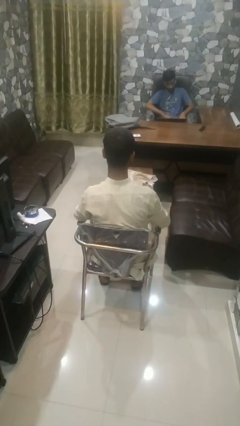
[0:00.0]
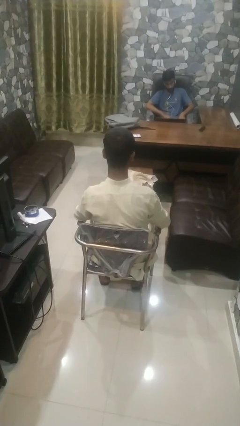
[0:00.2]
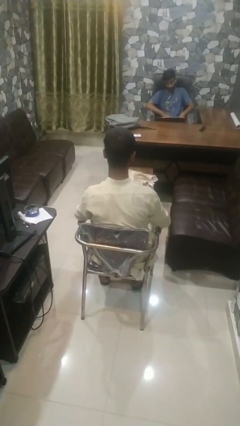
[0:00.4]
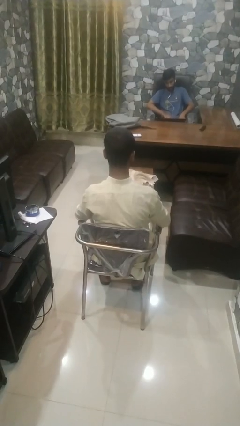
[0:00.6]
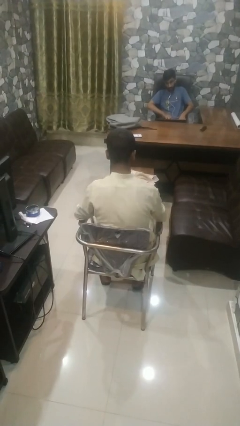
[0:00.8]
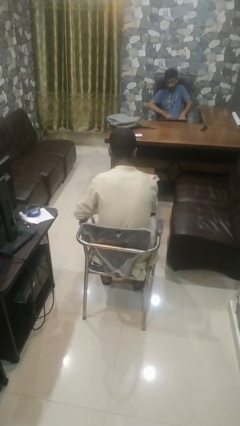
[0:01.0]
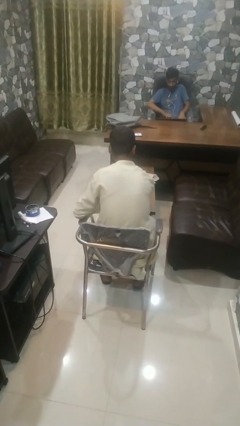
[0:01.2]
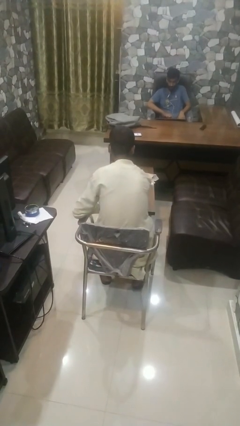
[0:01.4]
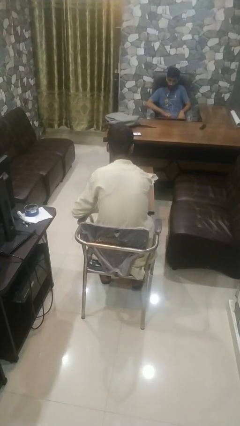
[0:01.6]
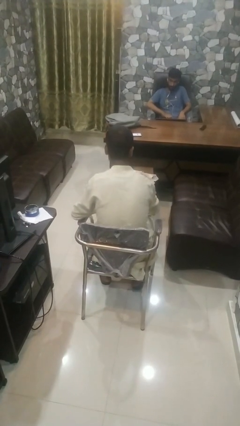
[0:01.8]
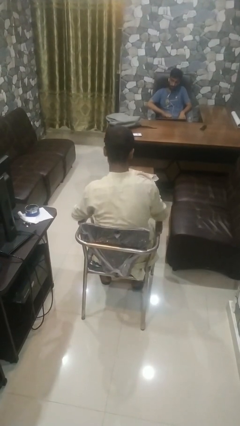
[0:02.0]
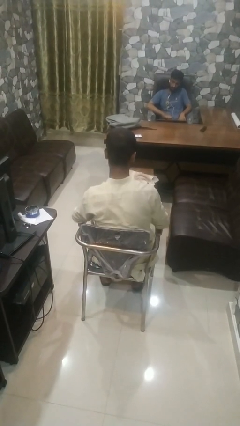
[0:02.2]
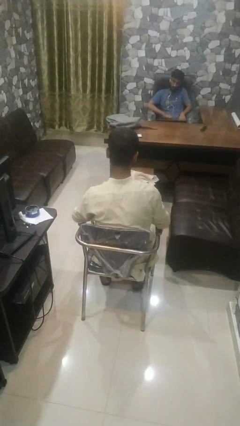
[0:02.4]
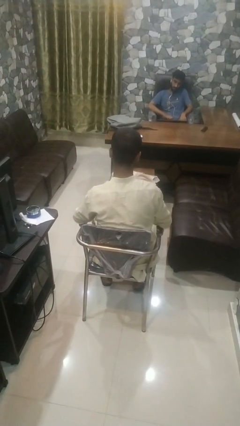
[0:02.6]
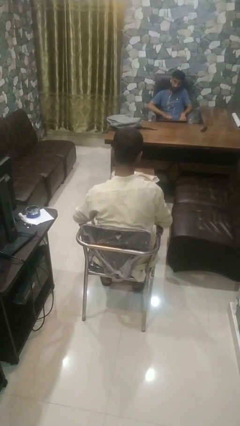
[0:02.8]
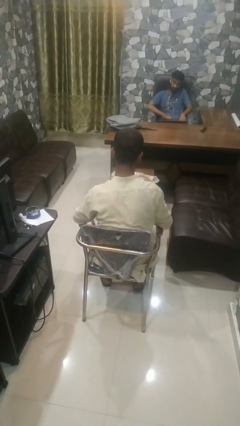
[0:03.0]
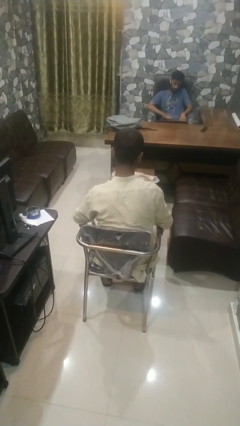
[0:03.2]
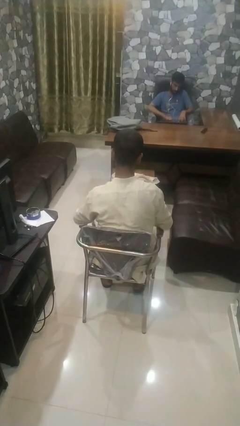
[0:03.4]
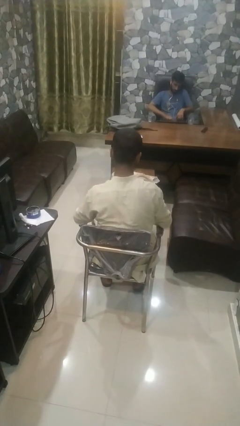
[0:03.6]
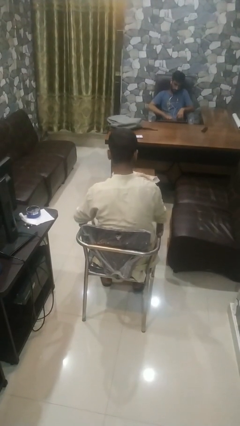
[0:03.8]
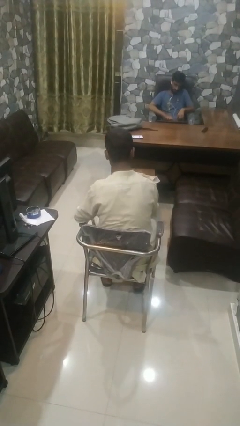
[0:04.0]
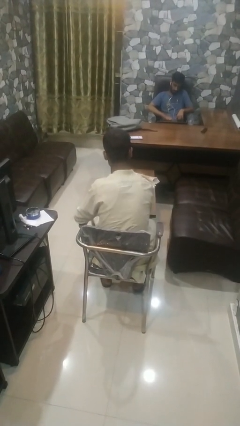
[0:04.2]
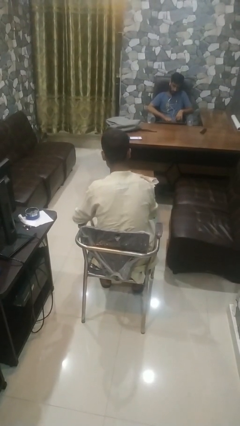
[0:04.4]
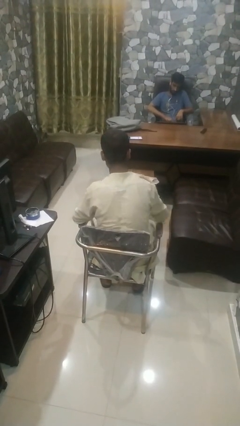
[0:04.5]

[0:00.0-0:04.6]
person paints fingernails

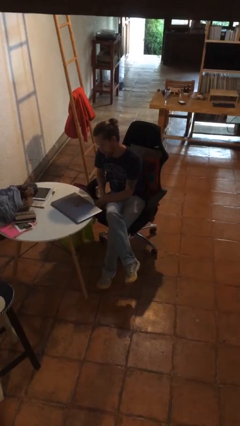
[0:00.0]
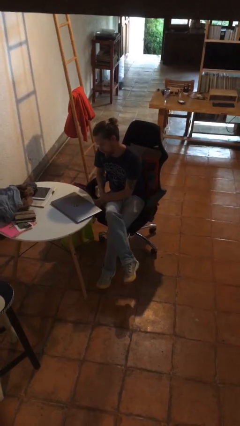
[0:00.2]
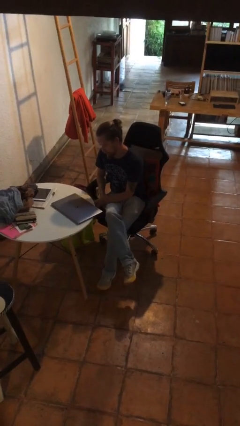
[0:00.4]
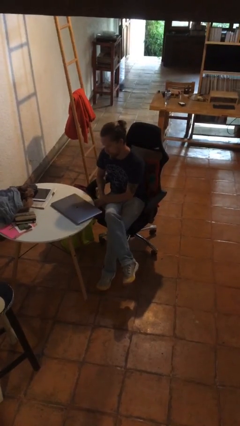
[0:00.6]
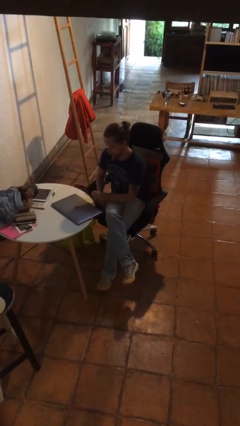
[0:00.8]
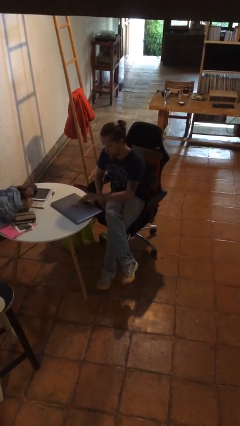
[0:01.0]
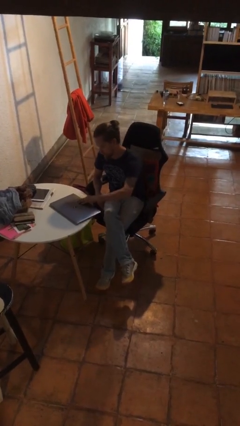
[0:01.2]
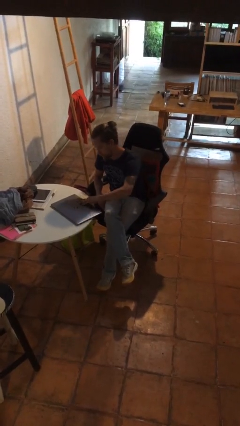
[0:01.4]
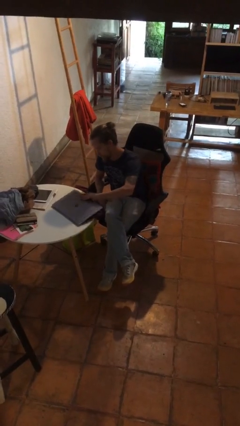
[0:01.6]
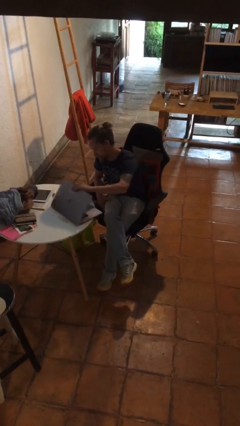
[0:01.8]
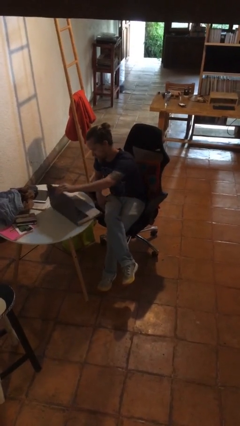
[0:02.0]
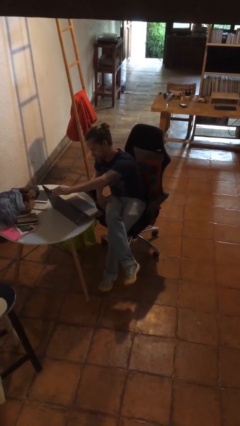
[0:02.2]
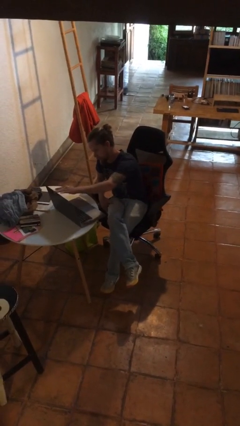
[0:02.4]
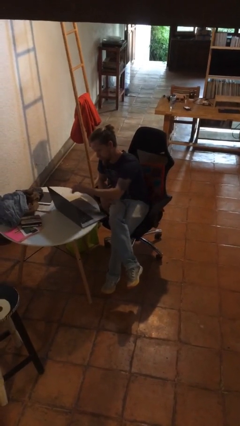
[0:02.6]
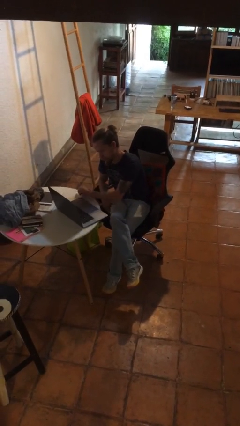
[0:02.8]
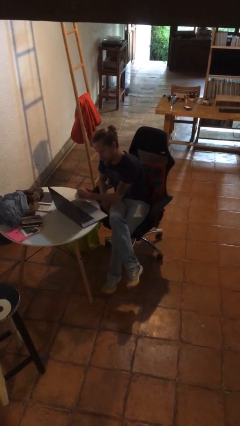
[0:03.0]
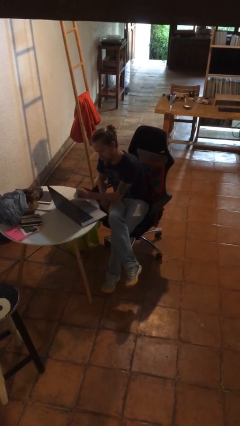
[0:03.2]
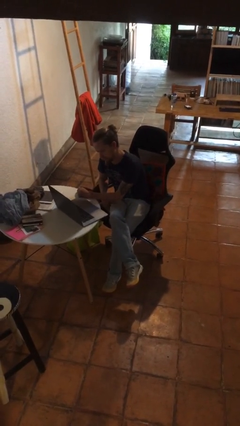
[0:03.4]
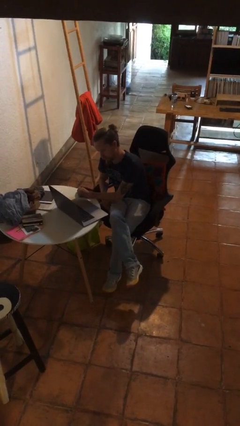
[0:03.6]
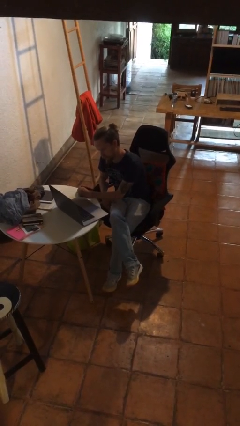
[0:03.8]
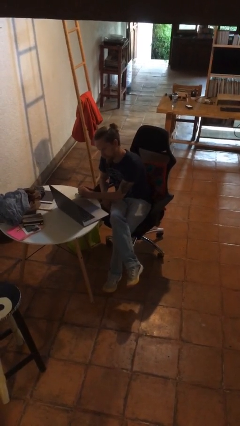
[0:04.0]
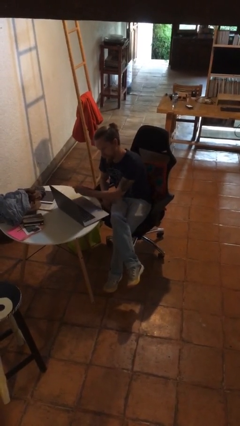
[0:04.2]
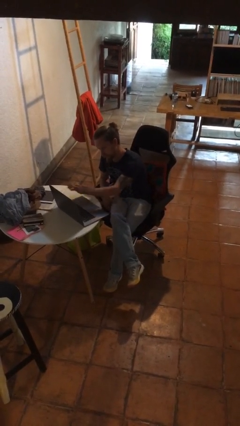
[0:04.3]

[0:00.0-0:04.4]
person opens laptop

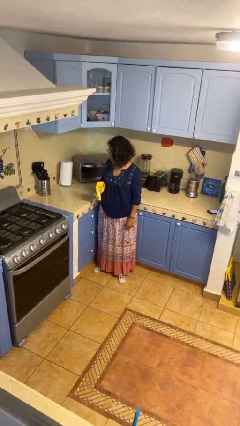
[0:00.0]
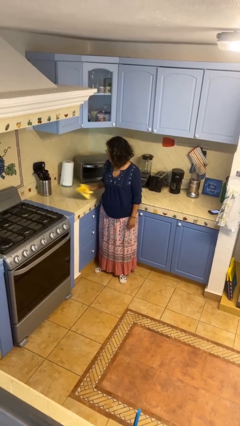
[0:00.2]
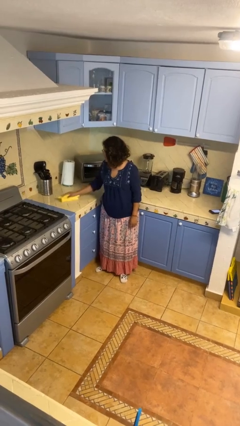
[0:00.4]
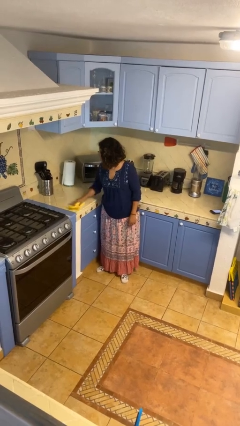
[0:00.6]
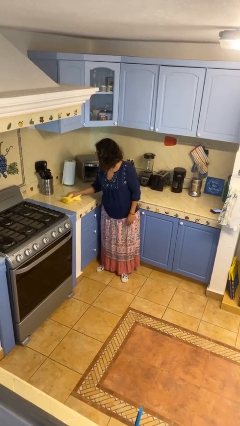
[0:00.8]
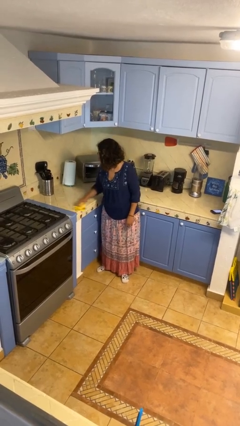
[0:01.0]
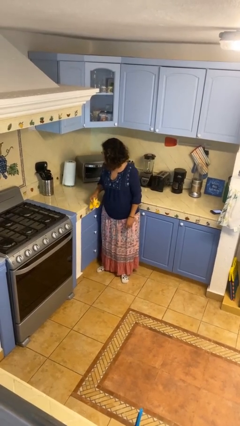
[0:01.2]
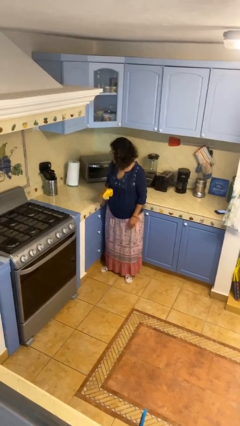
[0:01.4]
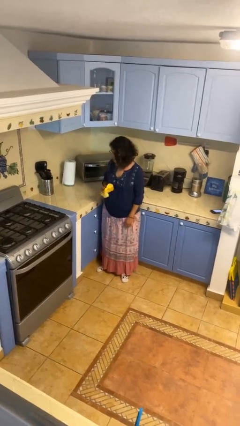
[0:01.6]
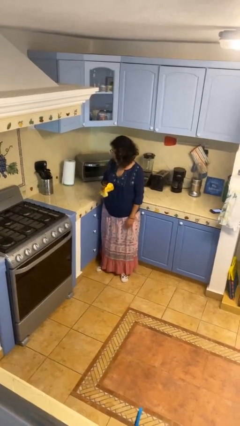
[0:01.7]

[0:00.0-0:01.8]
person cleans table with rag

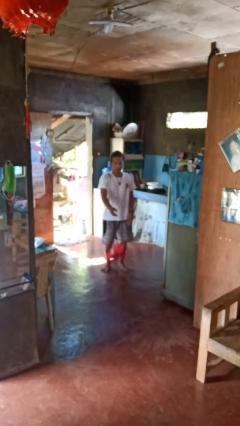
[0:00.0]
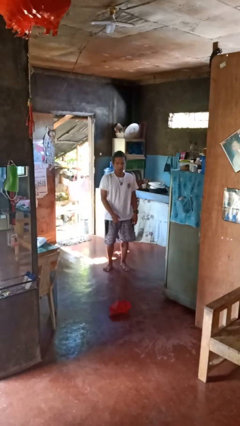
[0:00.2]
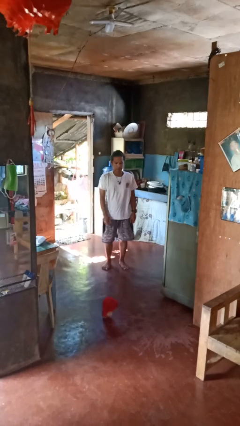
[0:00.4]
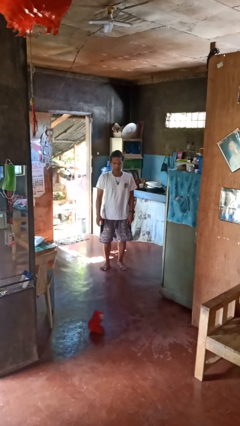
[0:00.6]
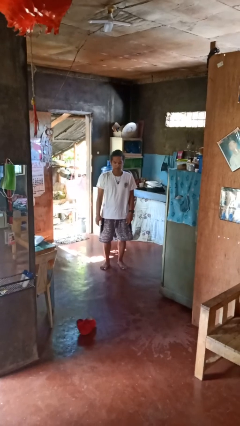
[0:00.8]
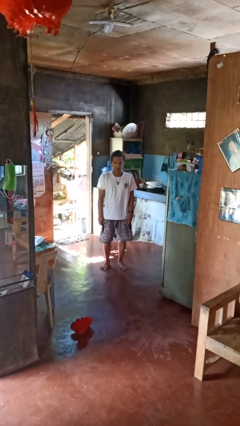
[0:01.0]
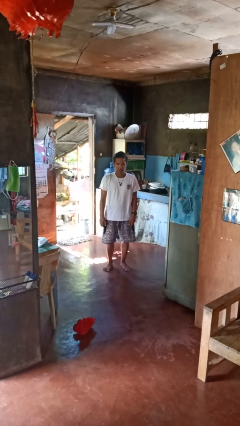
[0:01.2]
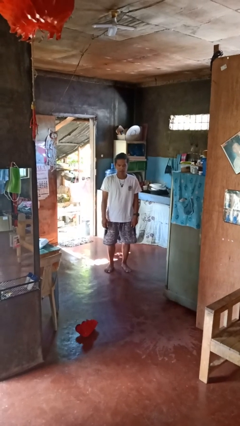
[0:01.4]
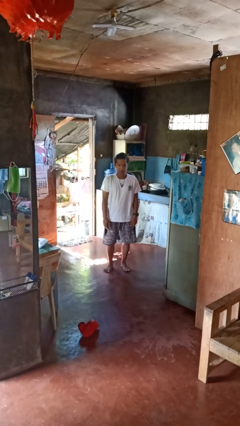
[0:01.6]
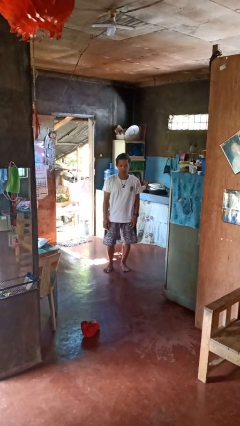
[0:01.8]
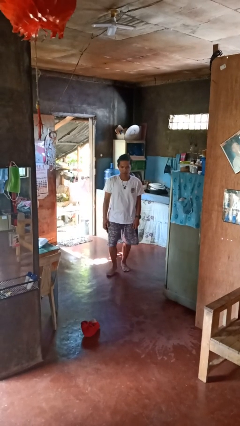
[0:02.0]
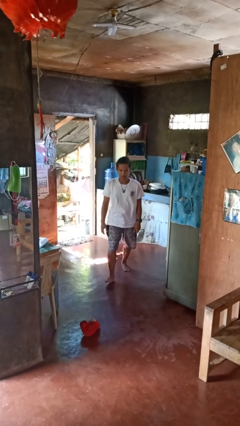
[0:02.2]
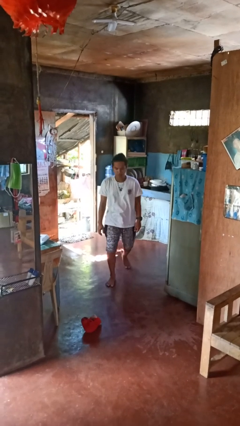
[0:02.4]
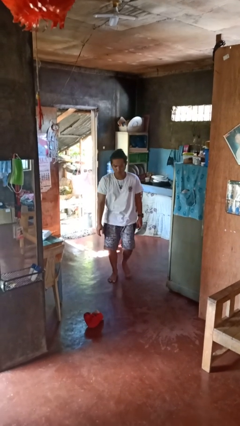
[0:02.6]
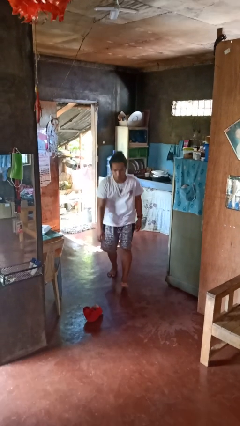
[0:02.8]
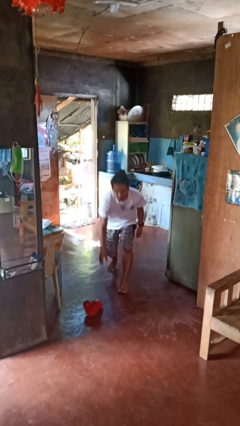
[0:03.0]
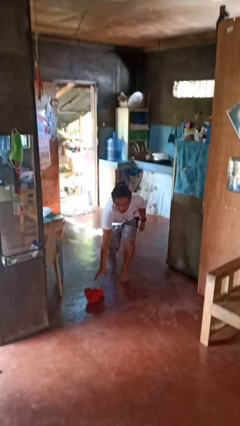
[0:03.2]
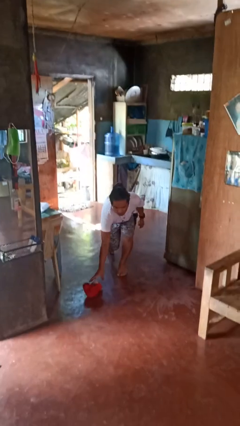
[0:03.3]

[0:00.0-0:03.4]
person throws object to ground

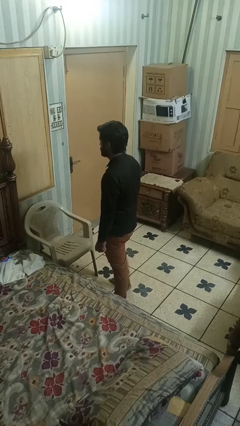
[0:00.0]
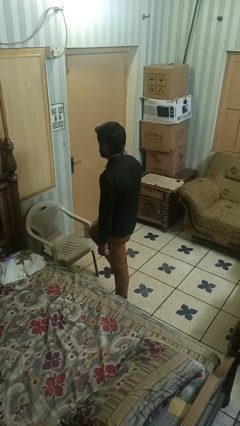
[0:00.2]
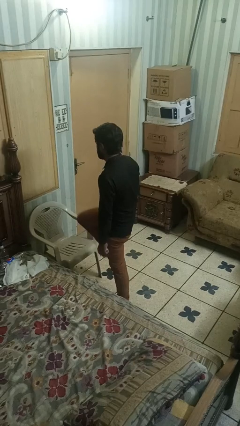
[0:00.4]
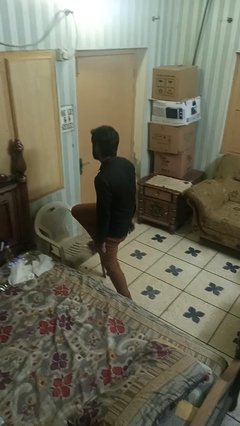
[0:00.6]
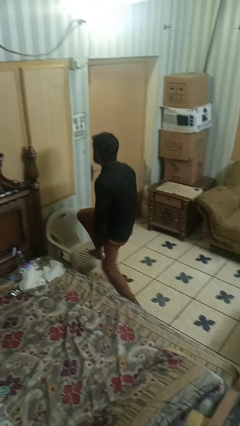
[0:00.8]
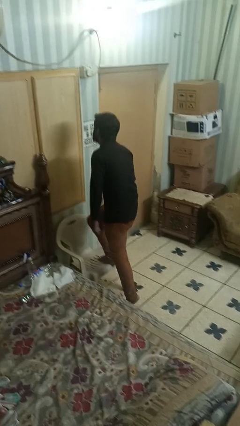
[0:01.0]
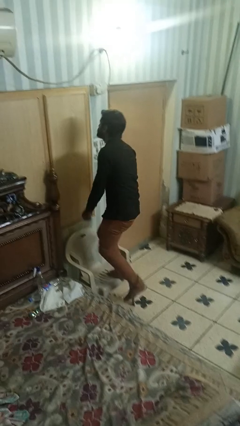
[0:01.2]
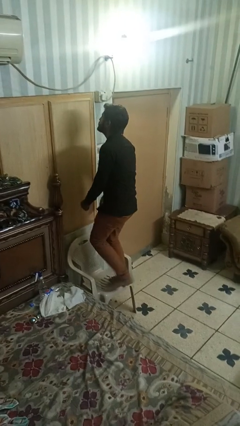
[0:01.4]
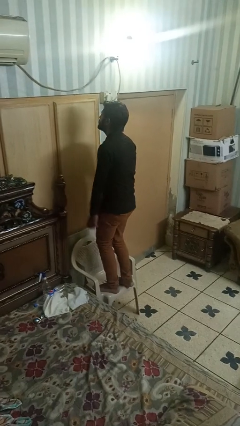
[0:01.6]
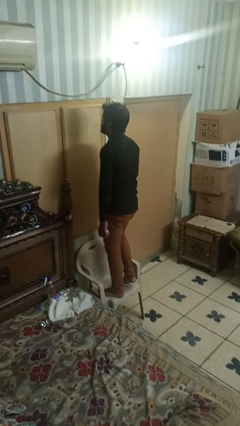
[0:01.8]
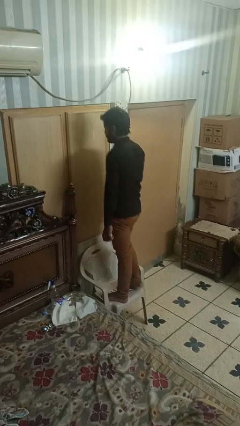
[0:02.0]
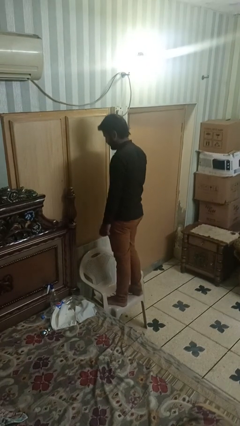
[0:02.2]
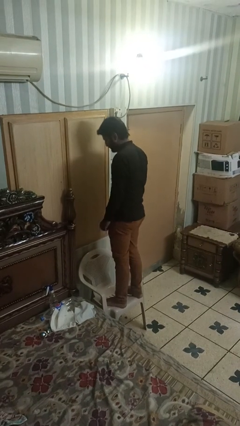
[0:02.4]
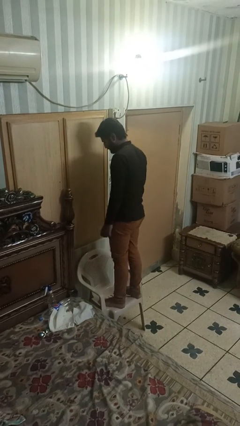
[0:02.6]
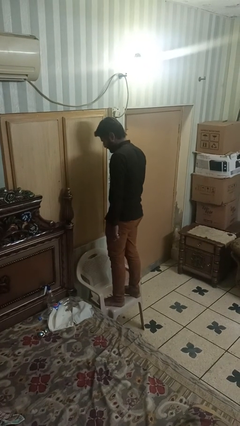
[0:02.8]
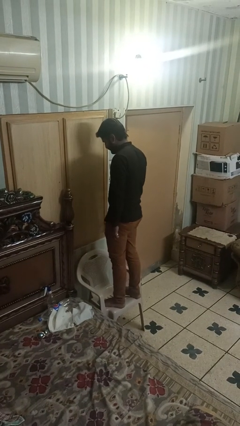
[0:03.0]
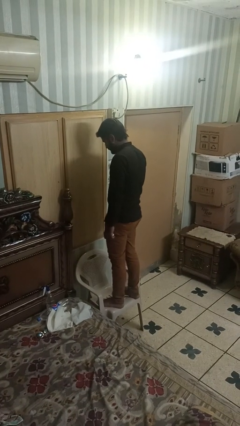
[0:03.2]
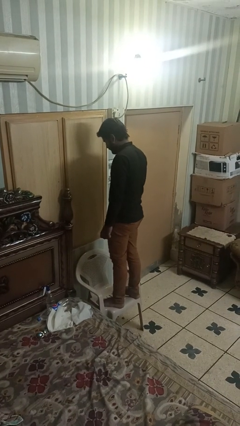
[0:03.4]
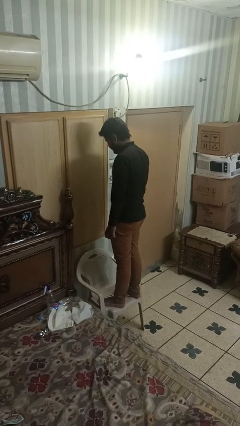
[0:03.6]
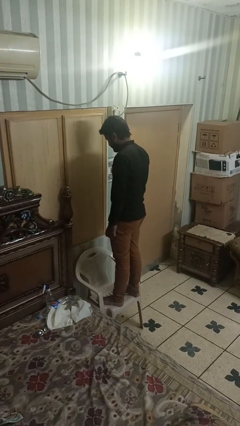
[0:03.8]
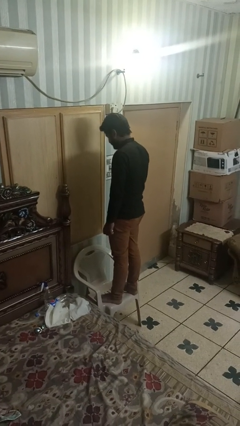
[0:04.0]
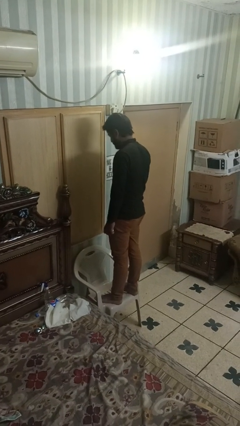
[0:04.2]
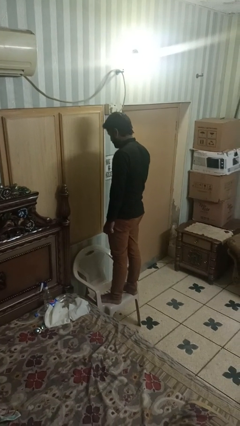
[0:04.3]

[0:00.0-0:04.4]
person climbs on chair
